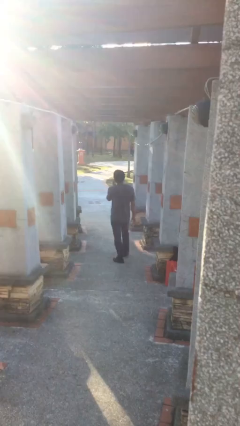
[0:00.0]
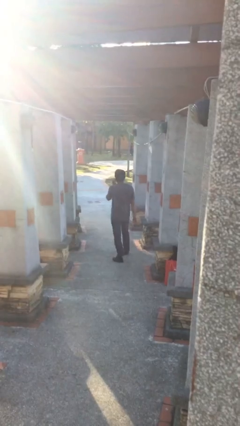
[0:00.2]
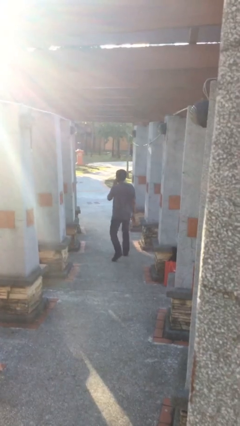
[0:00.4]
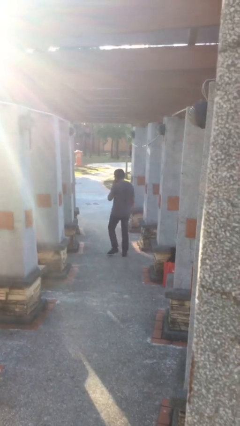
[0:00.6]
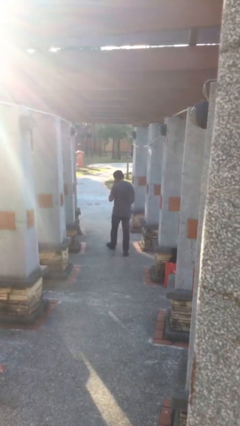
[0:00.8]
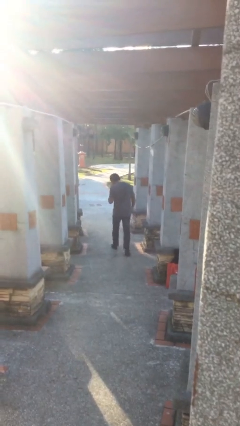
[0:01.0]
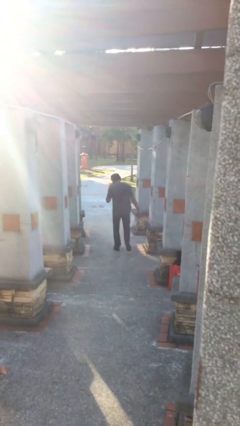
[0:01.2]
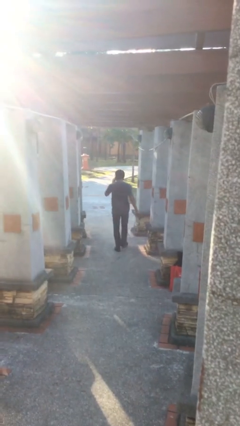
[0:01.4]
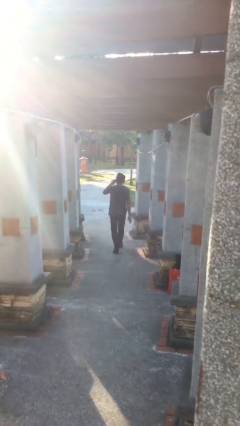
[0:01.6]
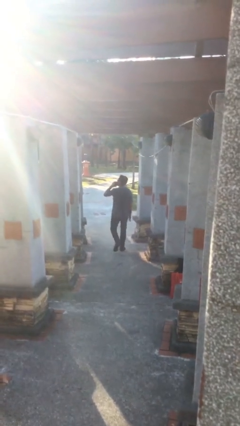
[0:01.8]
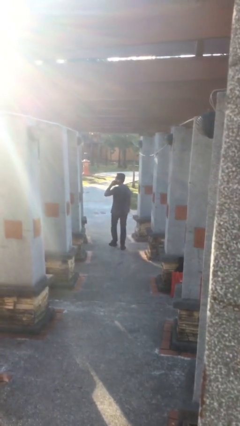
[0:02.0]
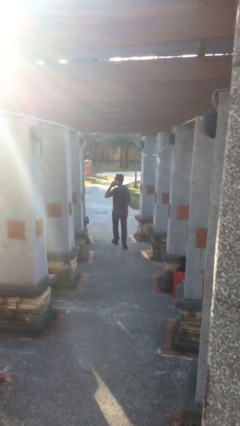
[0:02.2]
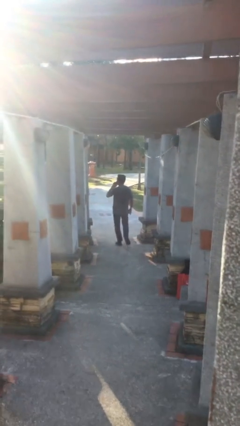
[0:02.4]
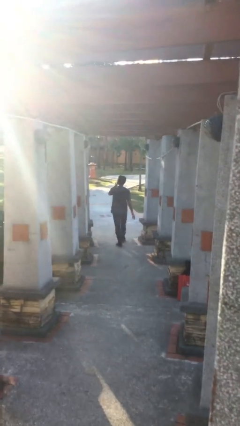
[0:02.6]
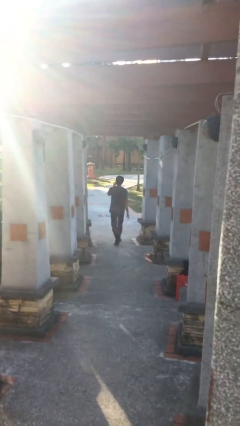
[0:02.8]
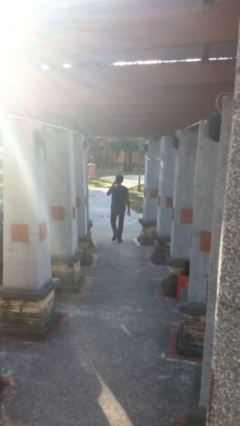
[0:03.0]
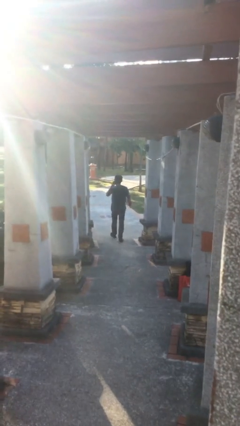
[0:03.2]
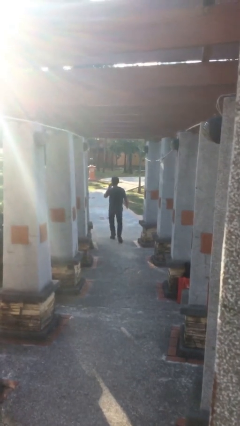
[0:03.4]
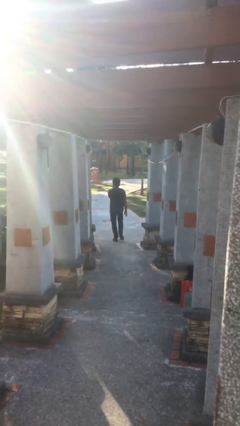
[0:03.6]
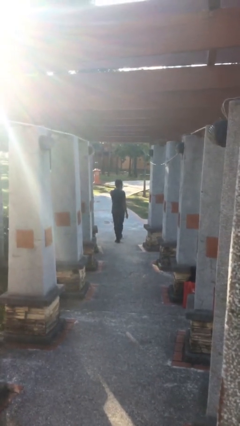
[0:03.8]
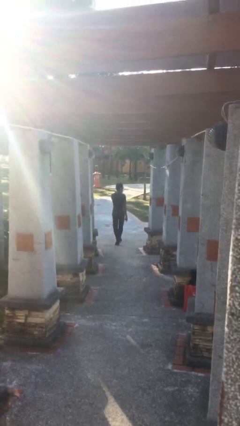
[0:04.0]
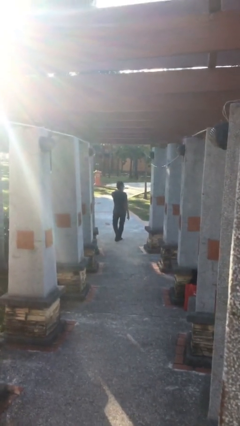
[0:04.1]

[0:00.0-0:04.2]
person exits scene through structure

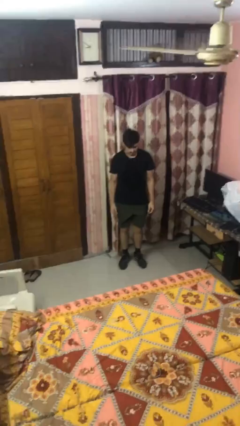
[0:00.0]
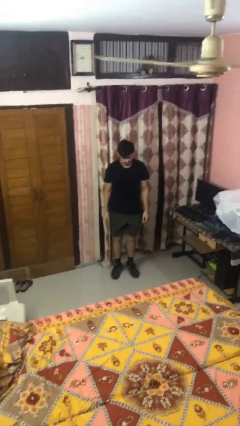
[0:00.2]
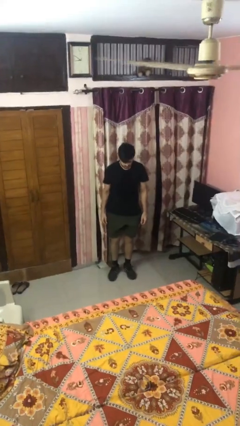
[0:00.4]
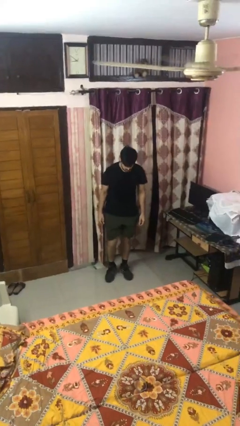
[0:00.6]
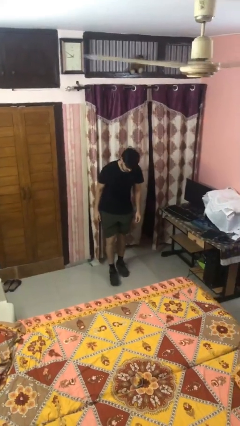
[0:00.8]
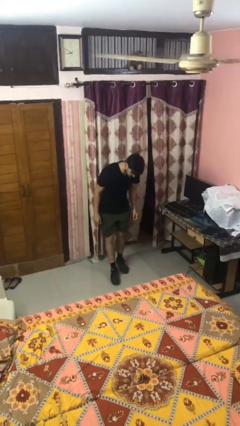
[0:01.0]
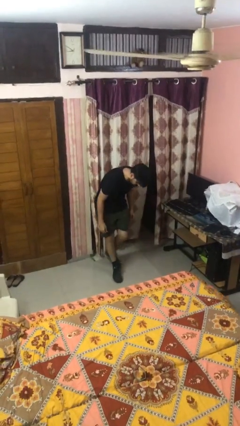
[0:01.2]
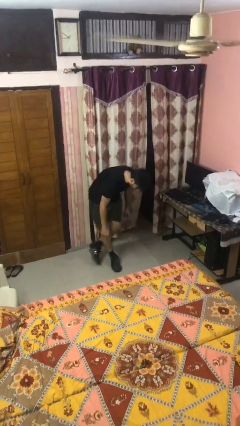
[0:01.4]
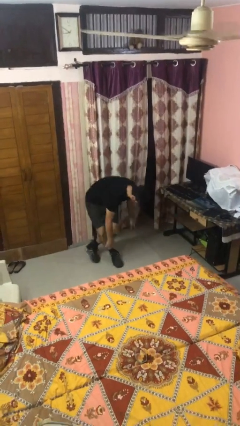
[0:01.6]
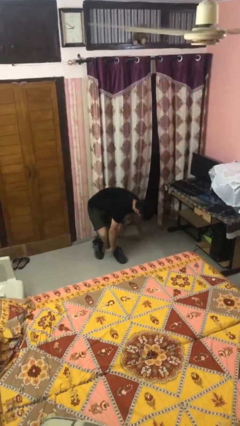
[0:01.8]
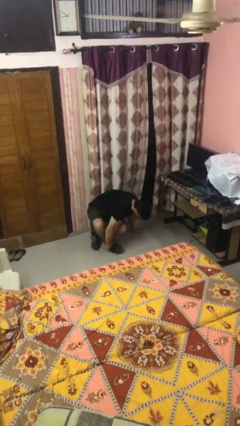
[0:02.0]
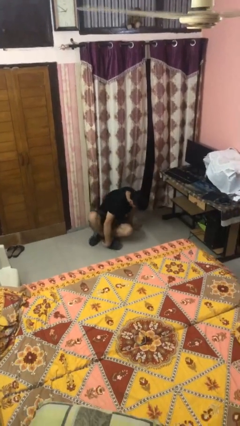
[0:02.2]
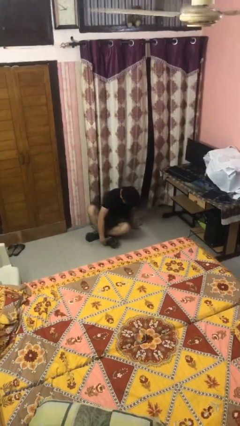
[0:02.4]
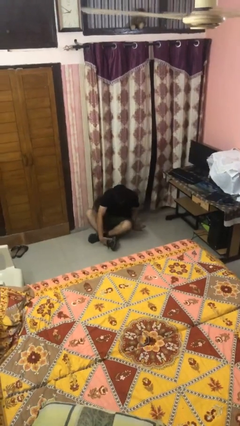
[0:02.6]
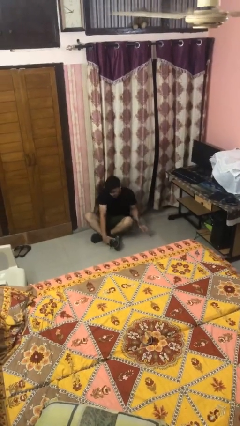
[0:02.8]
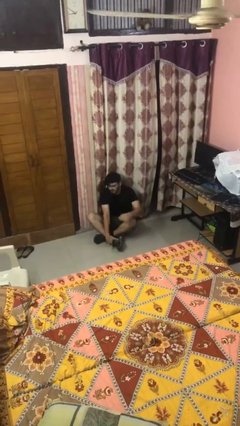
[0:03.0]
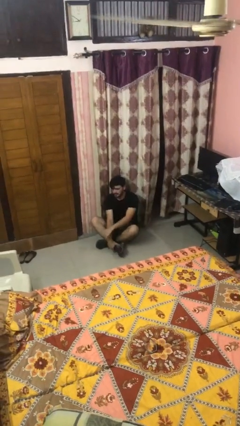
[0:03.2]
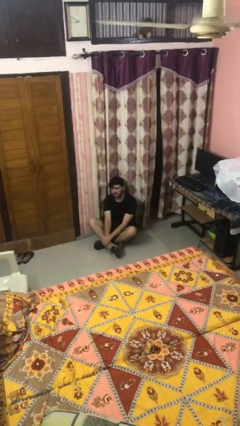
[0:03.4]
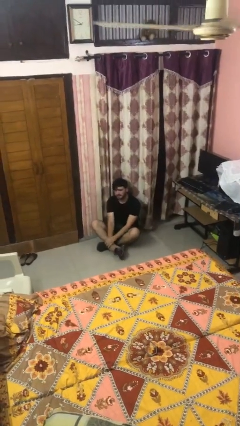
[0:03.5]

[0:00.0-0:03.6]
person sits crisscross

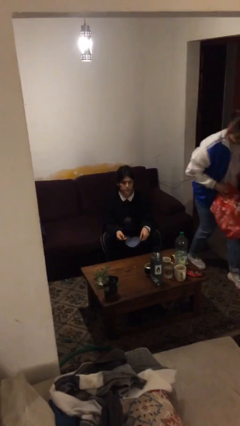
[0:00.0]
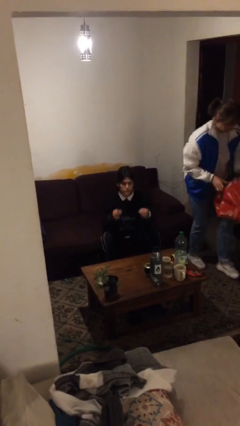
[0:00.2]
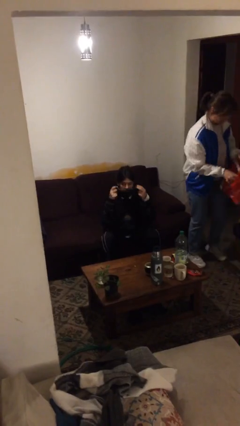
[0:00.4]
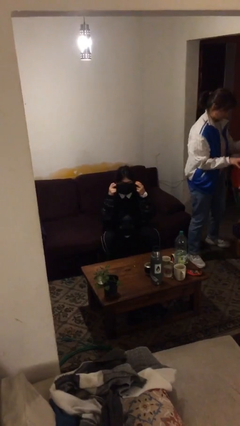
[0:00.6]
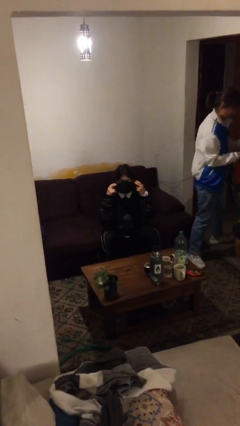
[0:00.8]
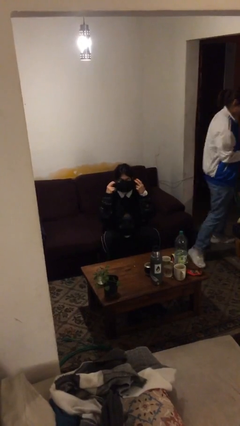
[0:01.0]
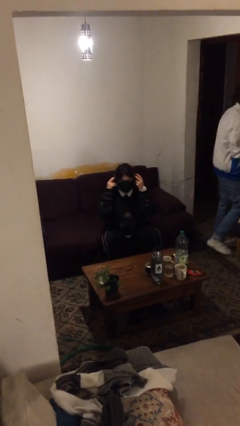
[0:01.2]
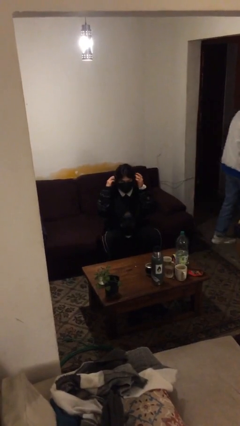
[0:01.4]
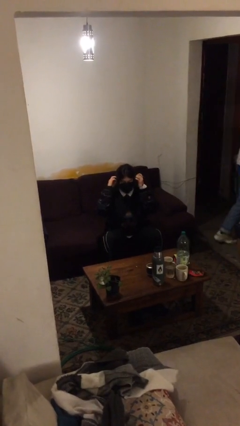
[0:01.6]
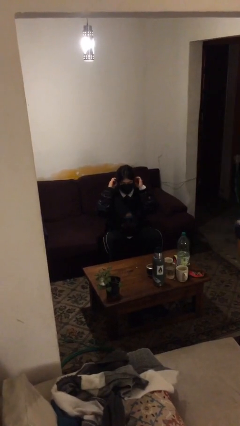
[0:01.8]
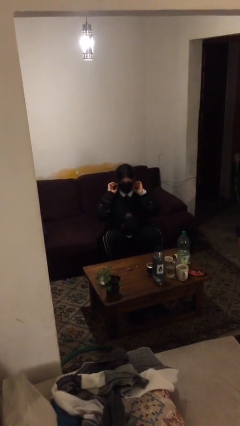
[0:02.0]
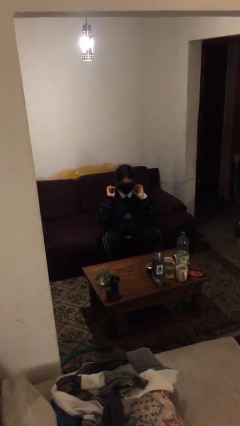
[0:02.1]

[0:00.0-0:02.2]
person puts on facemask

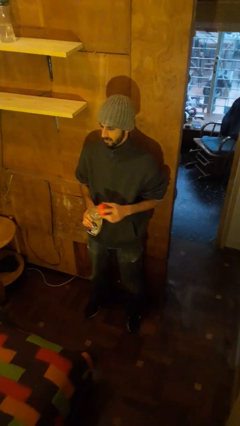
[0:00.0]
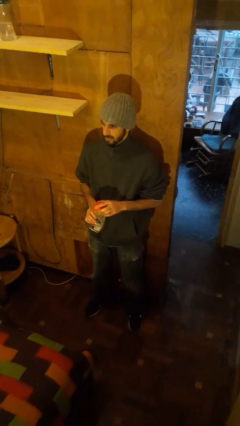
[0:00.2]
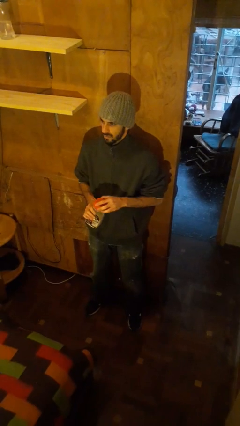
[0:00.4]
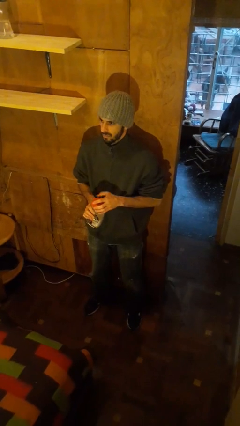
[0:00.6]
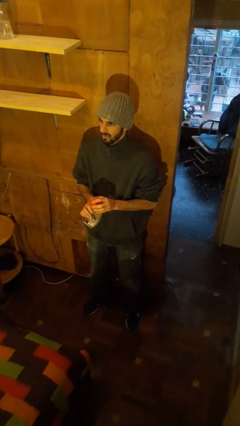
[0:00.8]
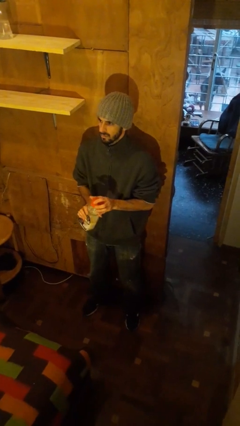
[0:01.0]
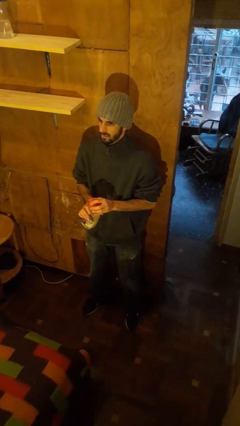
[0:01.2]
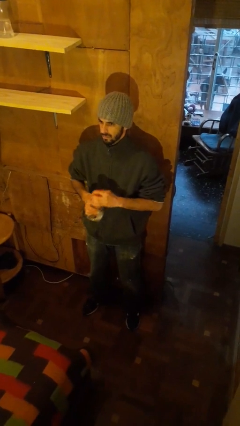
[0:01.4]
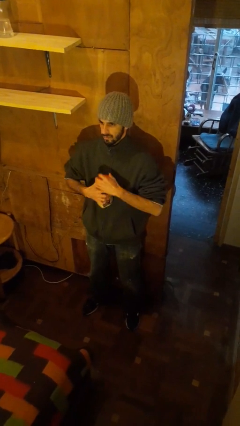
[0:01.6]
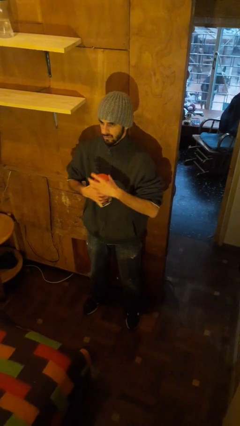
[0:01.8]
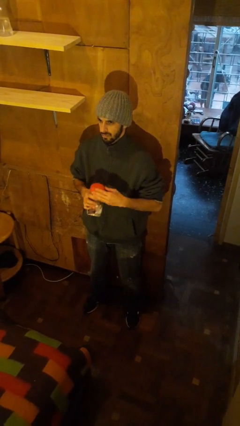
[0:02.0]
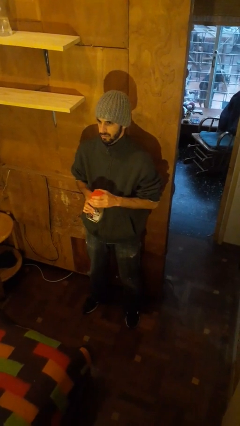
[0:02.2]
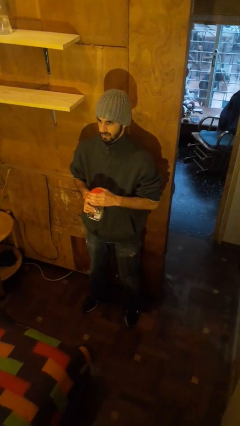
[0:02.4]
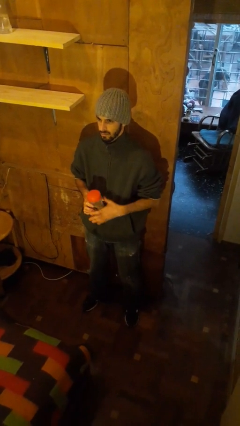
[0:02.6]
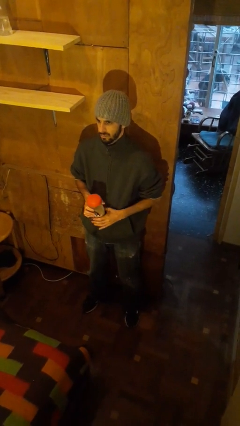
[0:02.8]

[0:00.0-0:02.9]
person closes jar

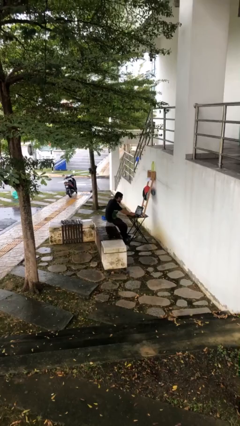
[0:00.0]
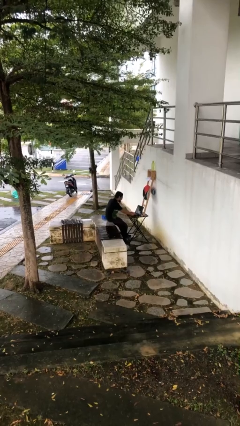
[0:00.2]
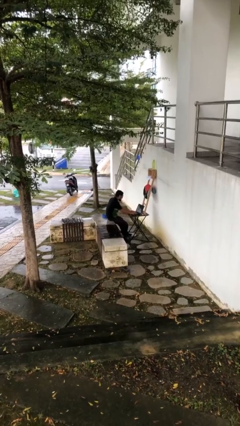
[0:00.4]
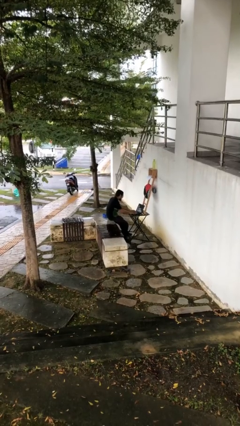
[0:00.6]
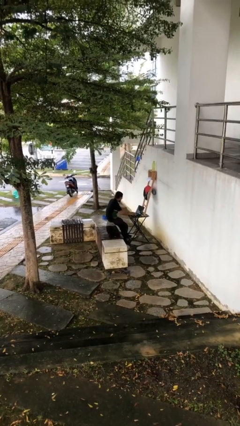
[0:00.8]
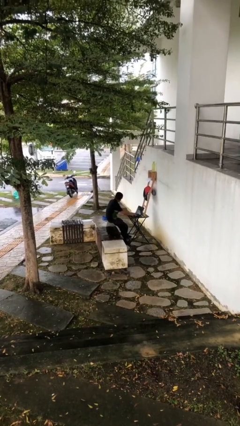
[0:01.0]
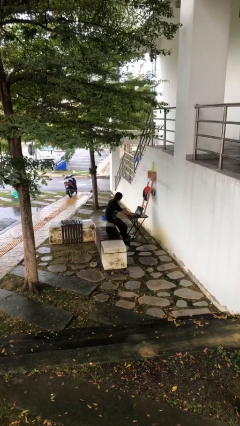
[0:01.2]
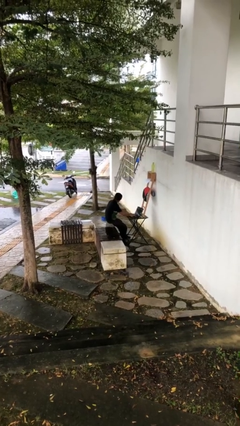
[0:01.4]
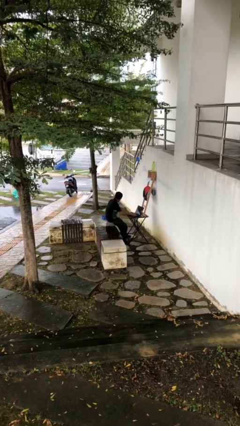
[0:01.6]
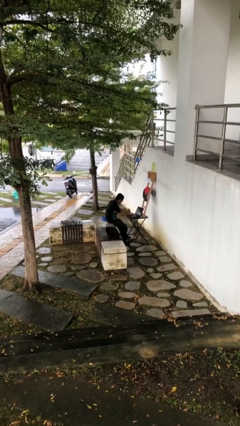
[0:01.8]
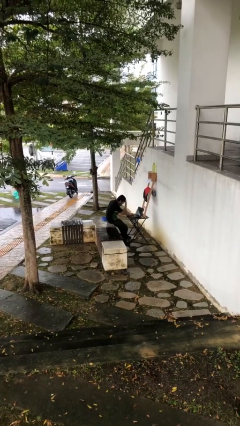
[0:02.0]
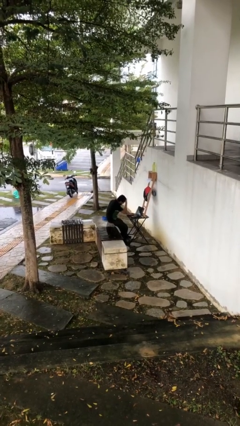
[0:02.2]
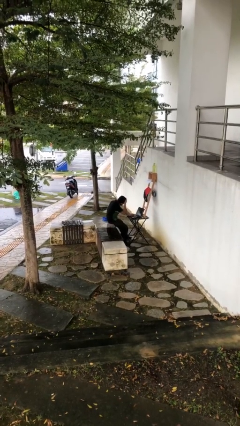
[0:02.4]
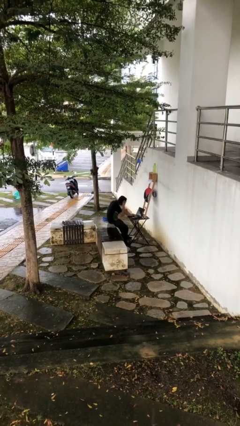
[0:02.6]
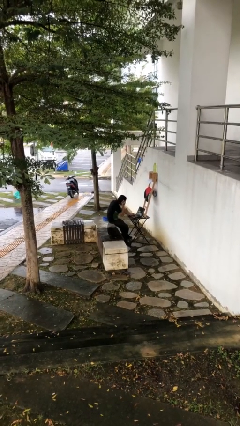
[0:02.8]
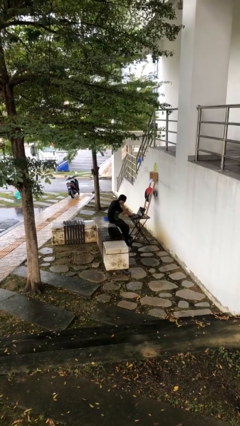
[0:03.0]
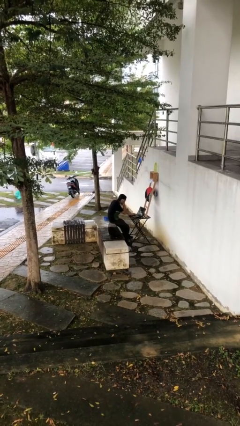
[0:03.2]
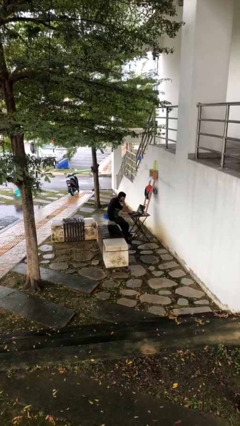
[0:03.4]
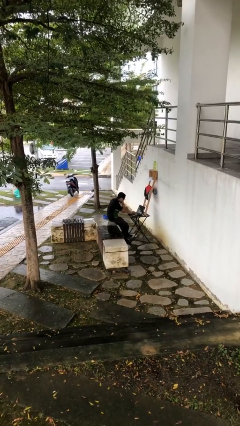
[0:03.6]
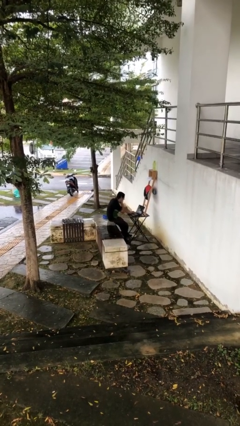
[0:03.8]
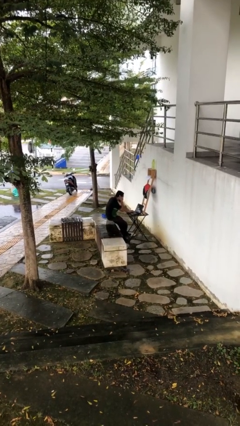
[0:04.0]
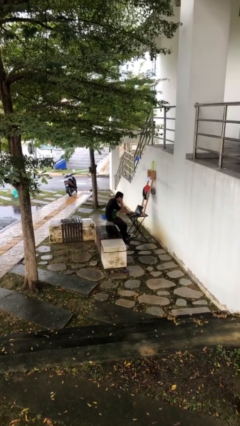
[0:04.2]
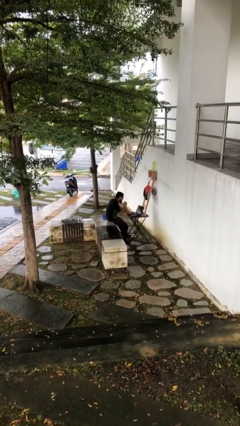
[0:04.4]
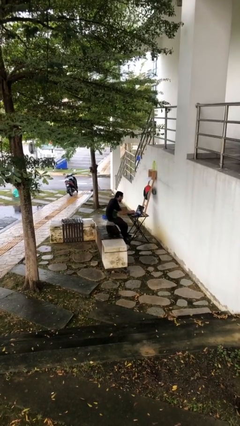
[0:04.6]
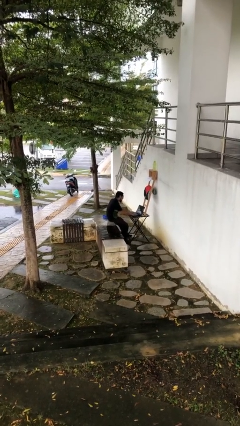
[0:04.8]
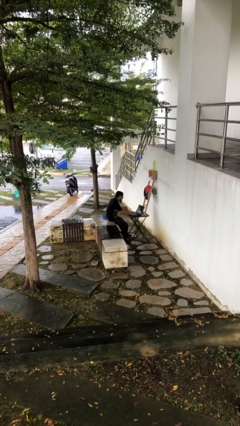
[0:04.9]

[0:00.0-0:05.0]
person interacts with laptop
